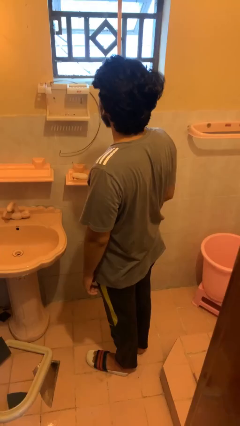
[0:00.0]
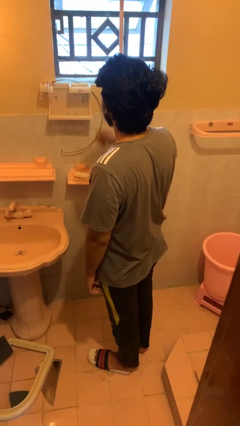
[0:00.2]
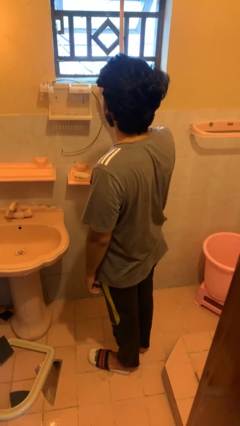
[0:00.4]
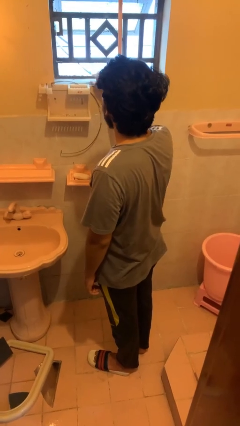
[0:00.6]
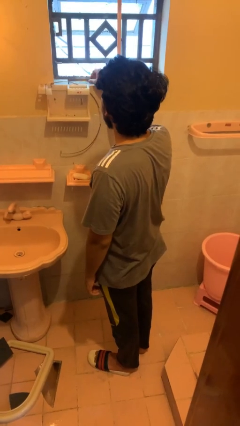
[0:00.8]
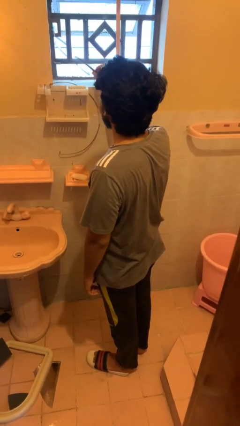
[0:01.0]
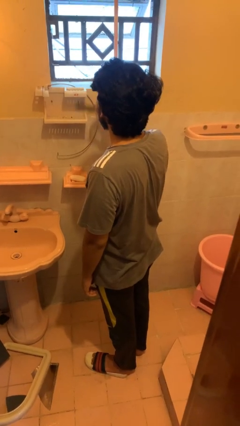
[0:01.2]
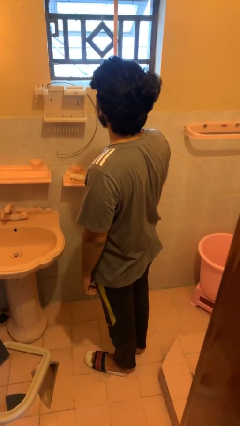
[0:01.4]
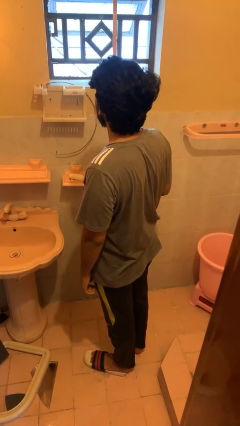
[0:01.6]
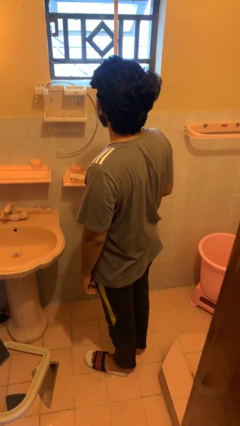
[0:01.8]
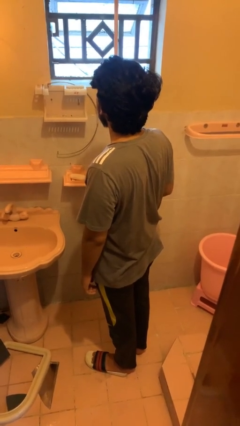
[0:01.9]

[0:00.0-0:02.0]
person picks up object from countertop

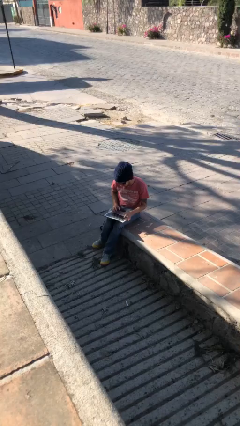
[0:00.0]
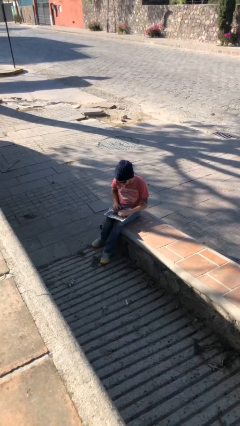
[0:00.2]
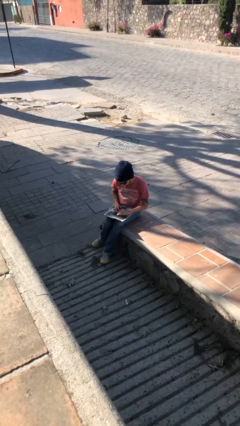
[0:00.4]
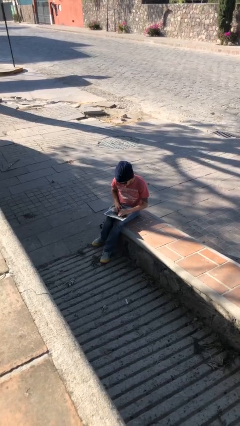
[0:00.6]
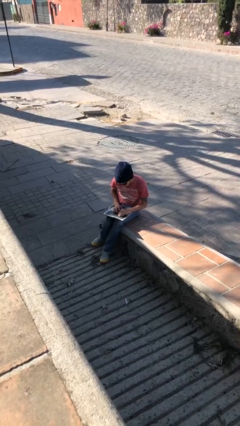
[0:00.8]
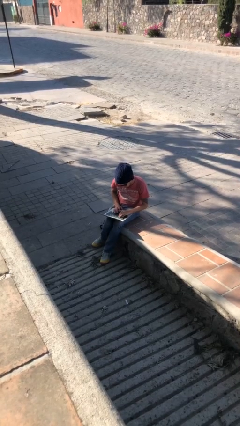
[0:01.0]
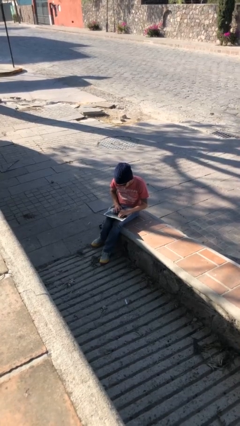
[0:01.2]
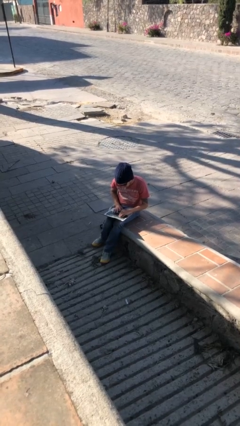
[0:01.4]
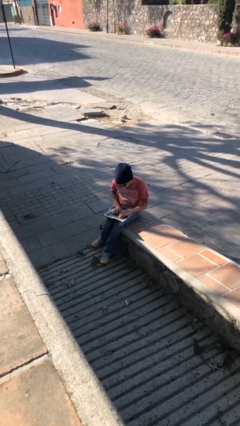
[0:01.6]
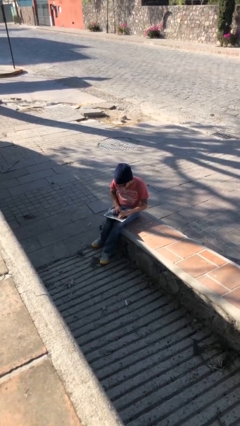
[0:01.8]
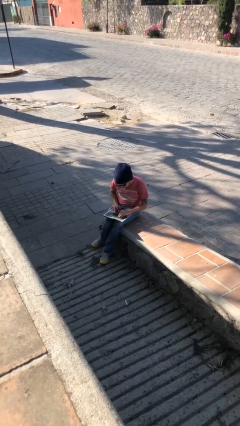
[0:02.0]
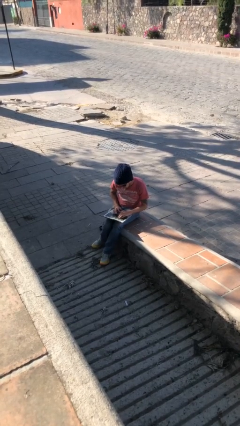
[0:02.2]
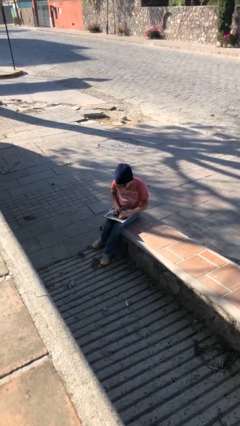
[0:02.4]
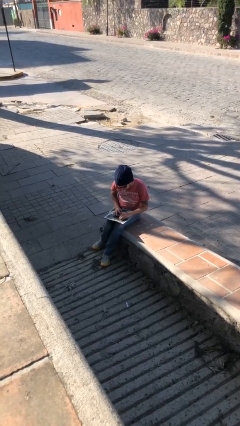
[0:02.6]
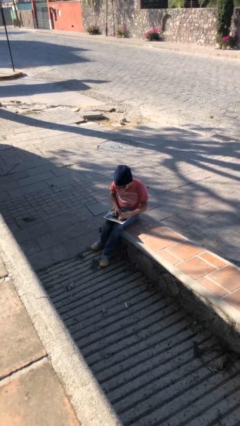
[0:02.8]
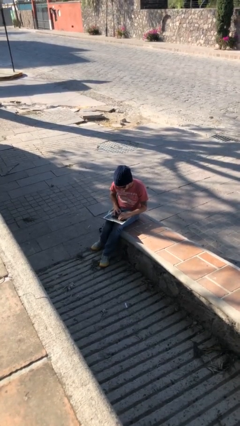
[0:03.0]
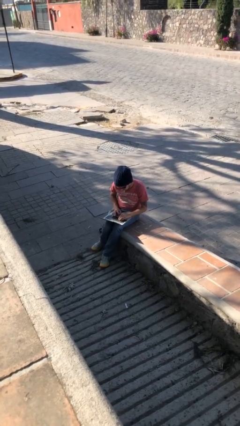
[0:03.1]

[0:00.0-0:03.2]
person interacts with laptop

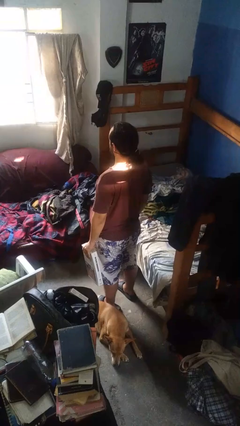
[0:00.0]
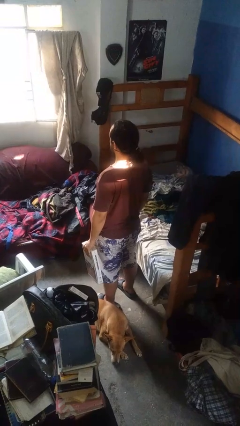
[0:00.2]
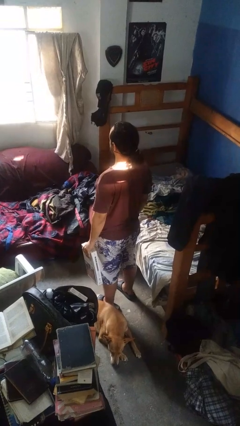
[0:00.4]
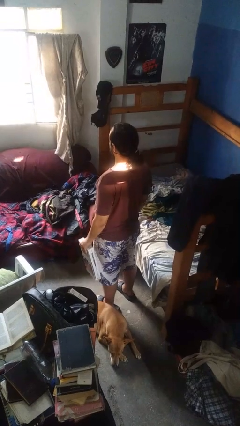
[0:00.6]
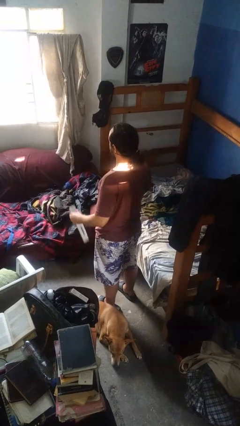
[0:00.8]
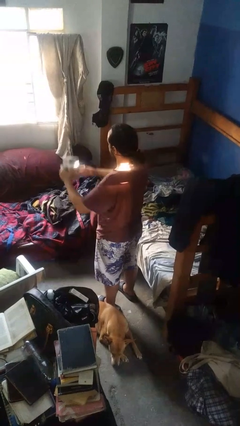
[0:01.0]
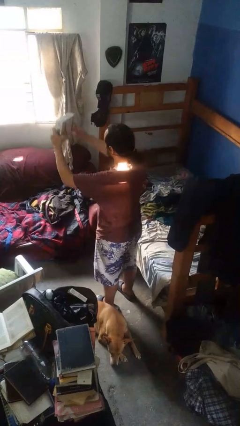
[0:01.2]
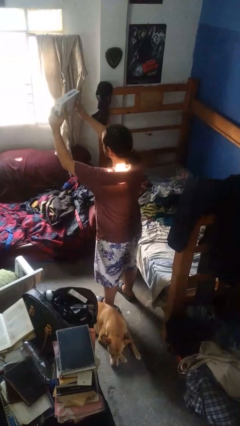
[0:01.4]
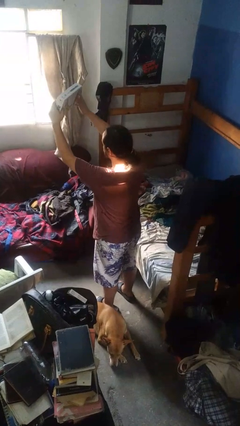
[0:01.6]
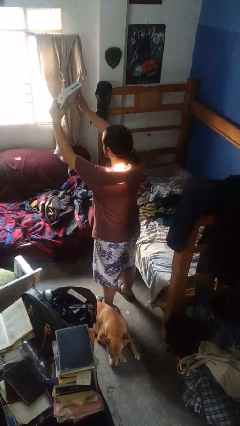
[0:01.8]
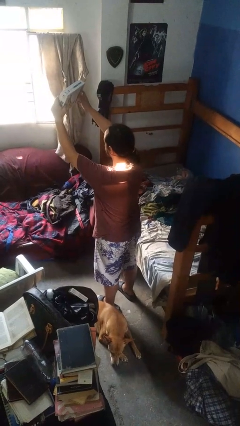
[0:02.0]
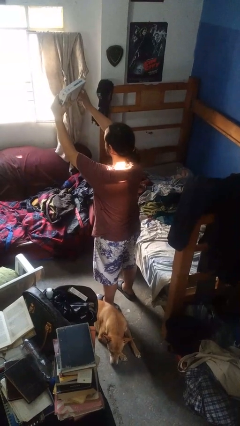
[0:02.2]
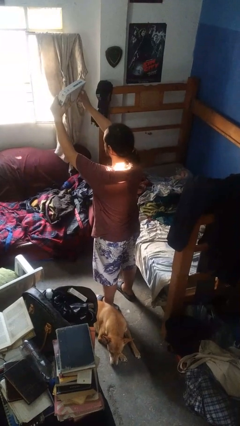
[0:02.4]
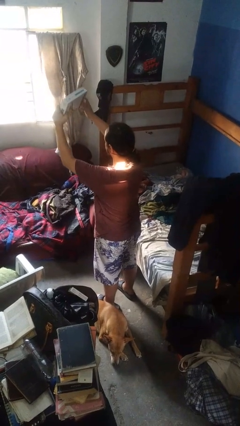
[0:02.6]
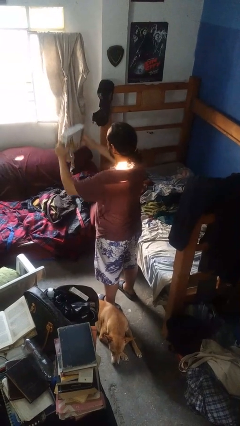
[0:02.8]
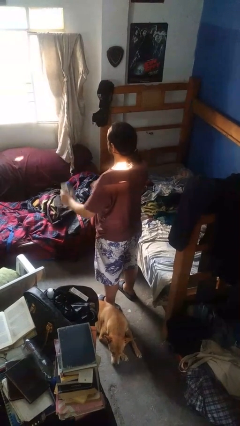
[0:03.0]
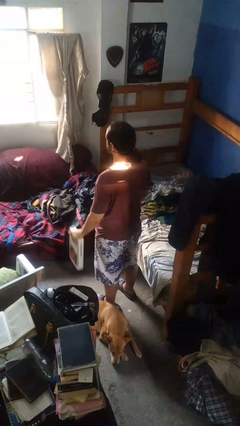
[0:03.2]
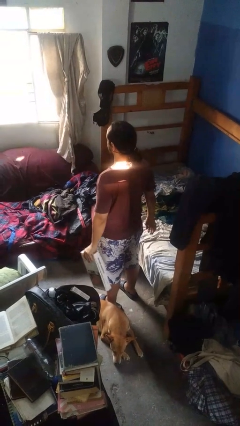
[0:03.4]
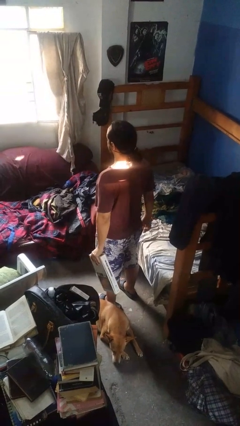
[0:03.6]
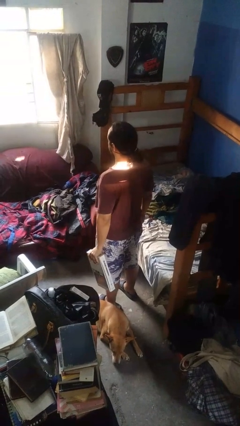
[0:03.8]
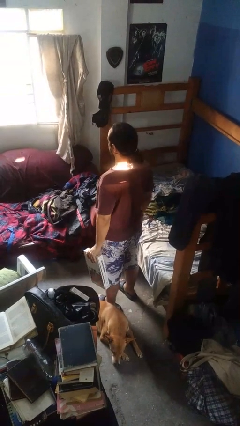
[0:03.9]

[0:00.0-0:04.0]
person holds object above head

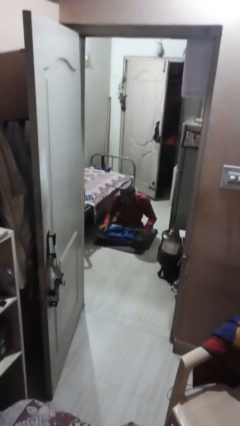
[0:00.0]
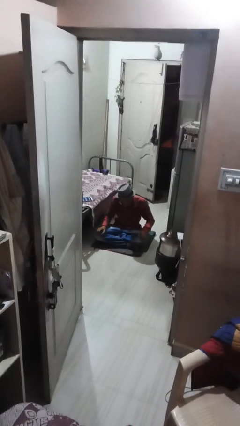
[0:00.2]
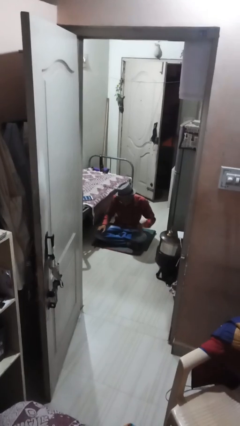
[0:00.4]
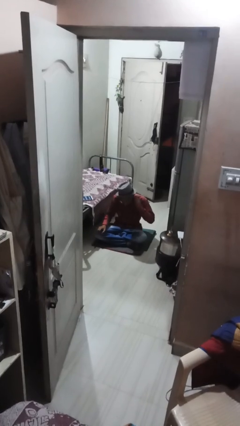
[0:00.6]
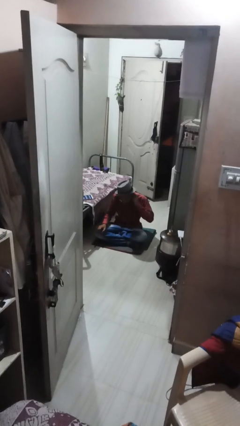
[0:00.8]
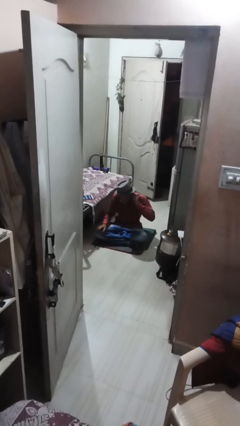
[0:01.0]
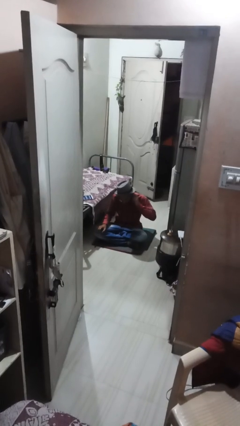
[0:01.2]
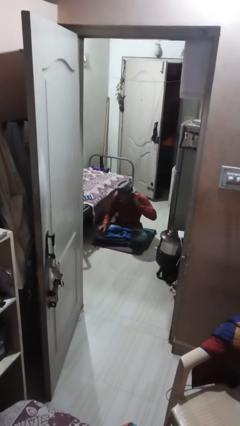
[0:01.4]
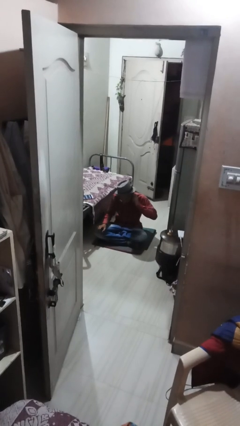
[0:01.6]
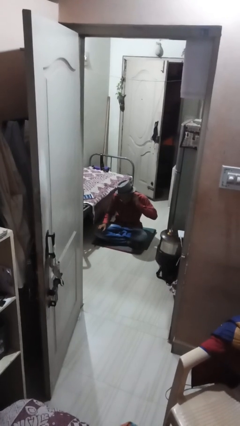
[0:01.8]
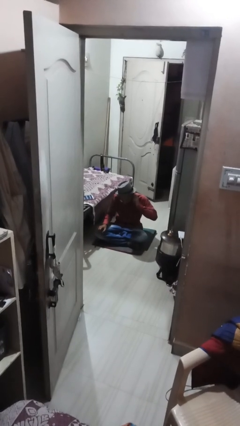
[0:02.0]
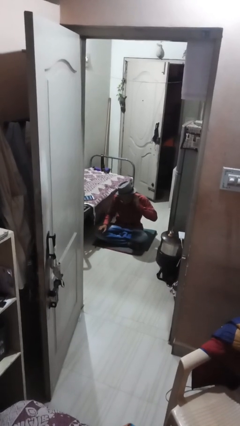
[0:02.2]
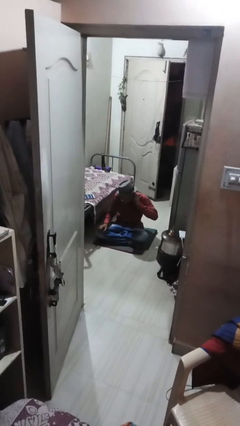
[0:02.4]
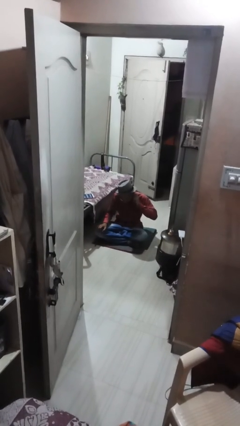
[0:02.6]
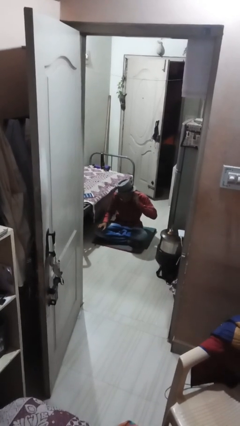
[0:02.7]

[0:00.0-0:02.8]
person touches earlobe

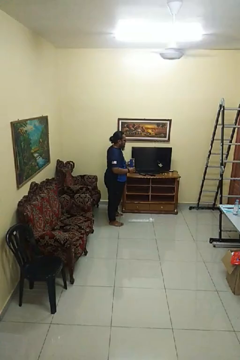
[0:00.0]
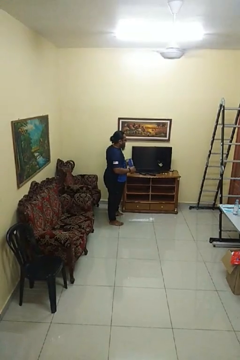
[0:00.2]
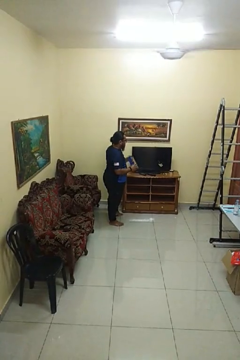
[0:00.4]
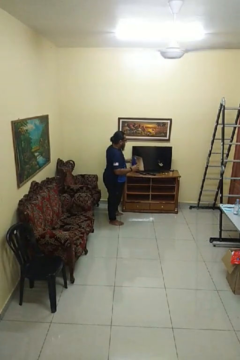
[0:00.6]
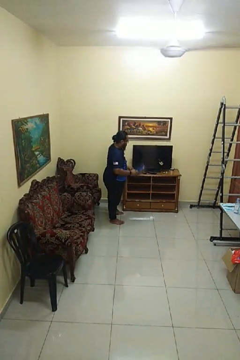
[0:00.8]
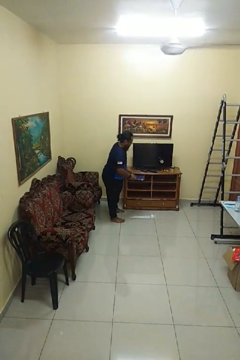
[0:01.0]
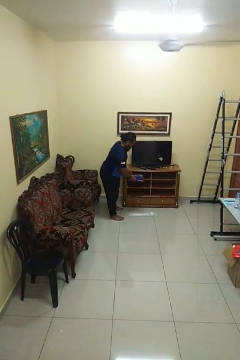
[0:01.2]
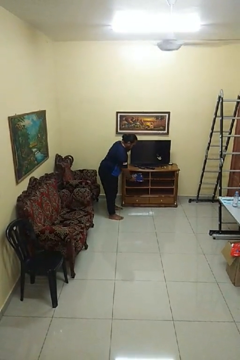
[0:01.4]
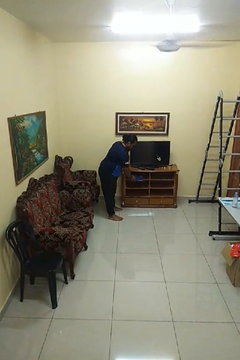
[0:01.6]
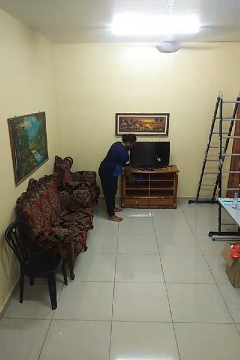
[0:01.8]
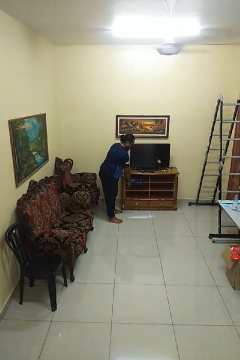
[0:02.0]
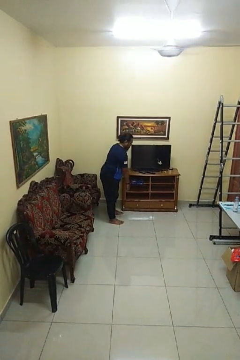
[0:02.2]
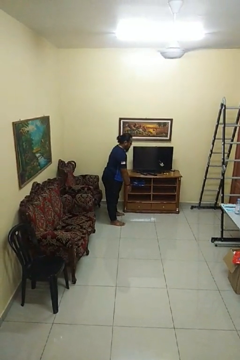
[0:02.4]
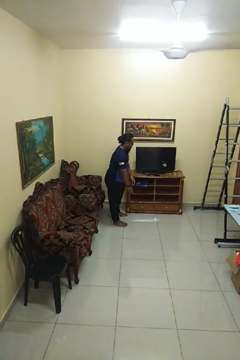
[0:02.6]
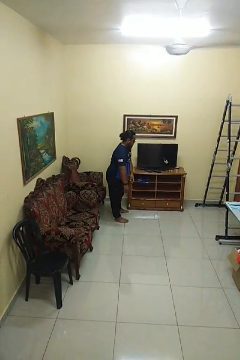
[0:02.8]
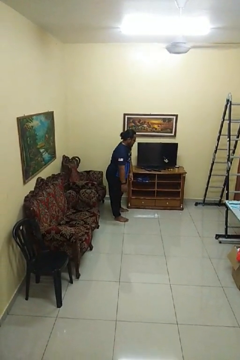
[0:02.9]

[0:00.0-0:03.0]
person puts down object into cabinet

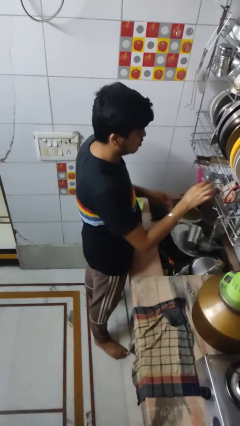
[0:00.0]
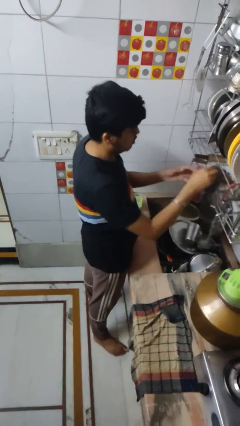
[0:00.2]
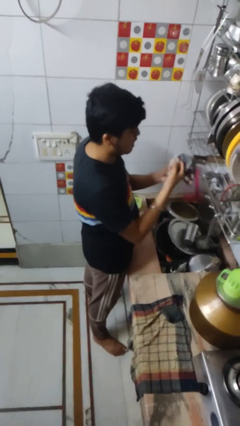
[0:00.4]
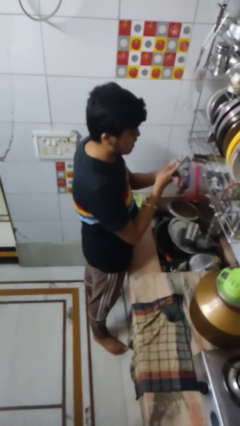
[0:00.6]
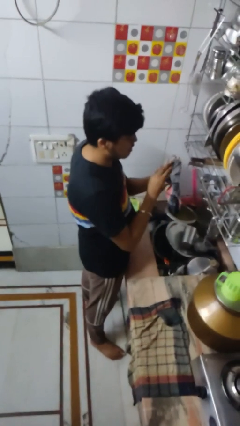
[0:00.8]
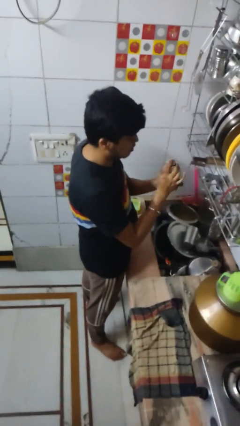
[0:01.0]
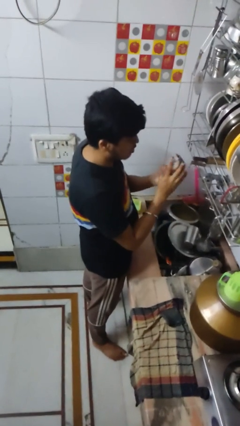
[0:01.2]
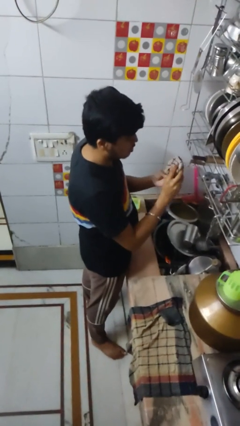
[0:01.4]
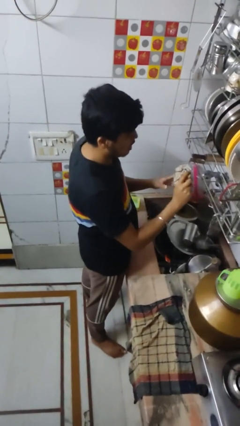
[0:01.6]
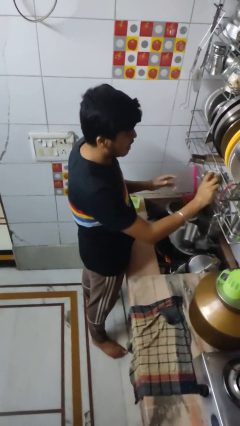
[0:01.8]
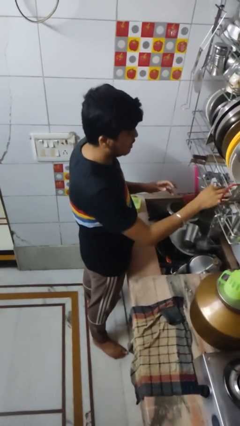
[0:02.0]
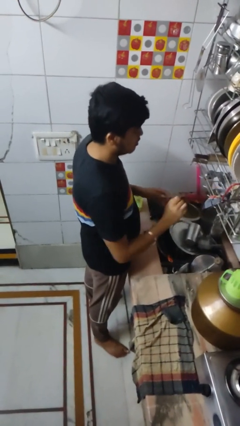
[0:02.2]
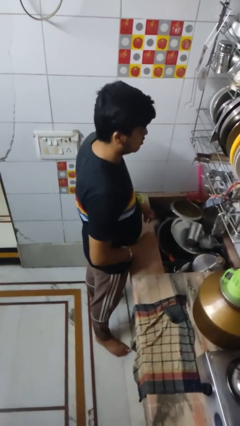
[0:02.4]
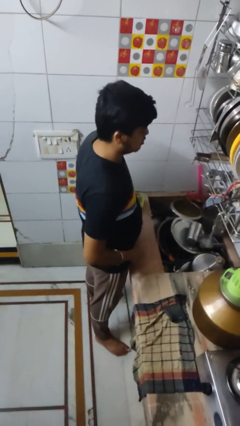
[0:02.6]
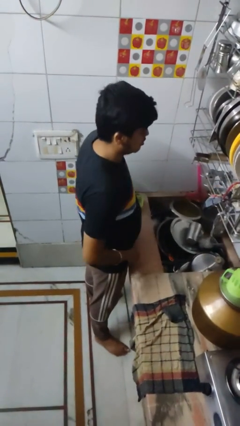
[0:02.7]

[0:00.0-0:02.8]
person dries hands with towel

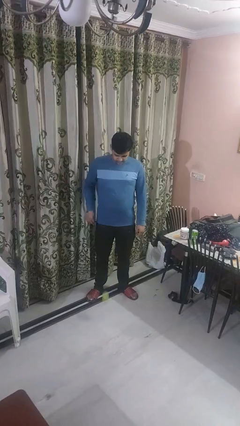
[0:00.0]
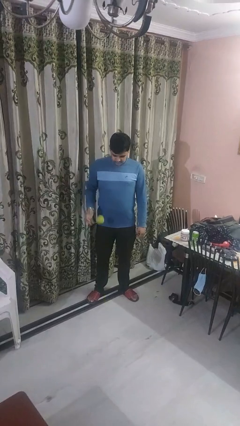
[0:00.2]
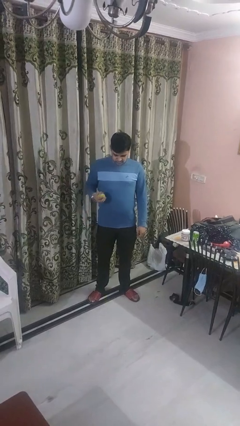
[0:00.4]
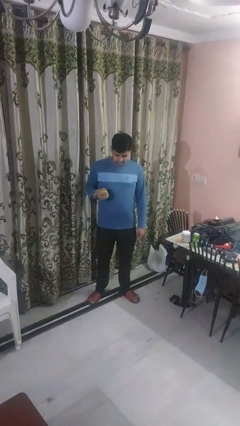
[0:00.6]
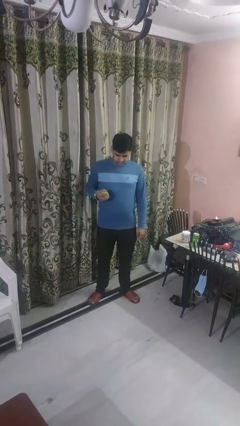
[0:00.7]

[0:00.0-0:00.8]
person bounces ball on floor
